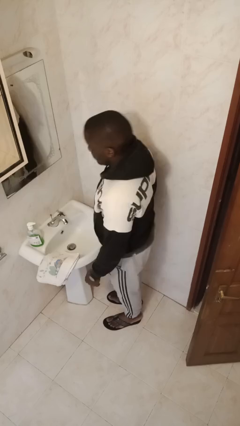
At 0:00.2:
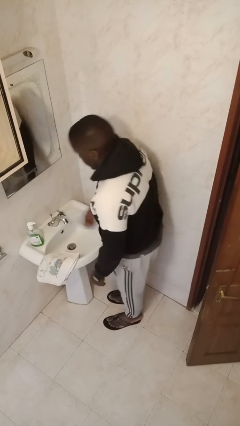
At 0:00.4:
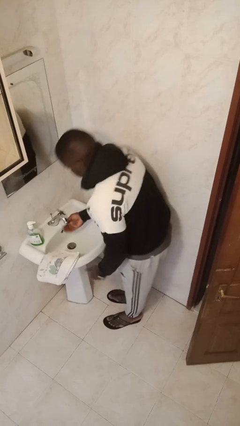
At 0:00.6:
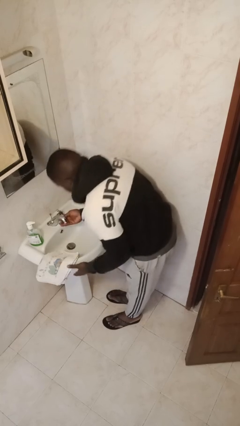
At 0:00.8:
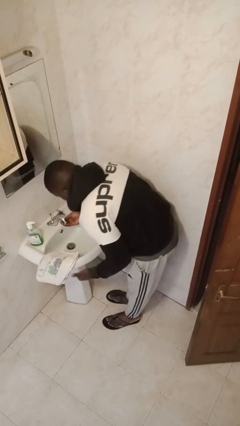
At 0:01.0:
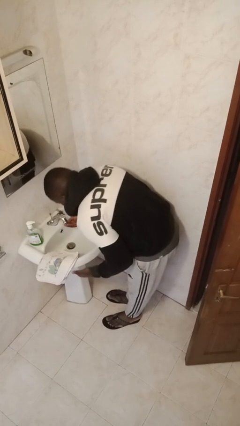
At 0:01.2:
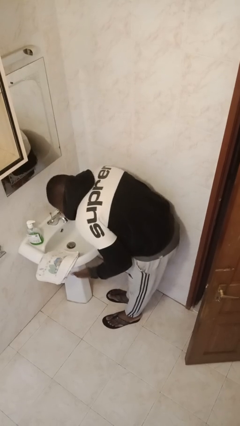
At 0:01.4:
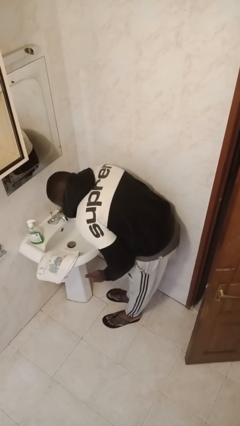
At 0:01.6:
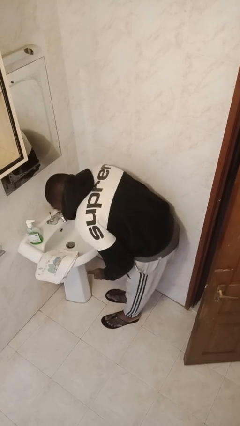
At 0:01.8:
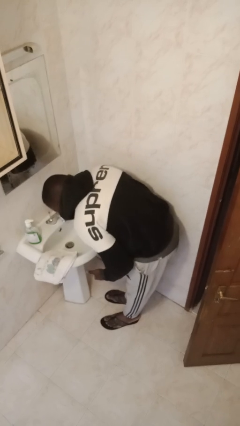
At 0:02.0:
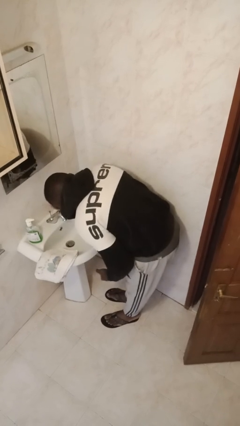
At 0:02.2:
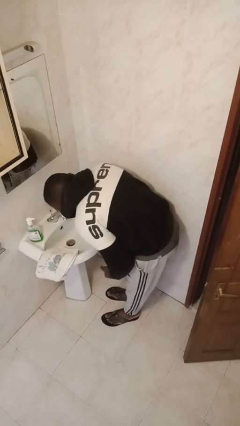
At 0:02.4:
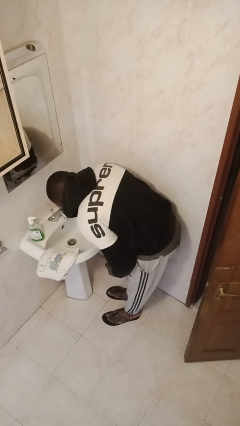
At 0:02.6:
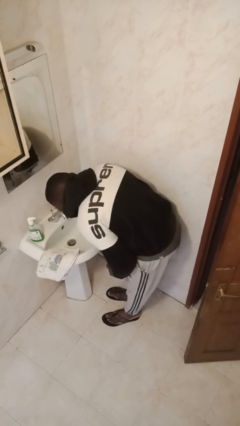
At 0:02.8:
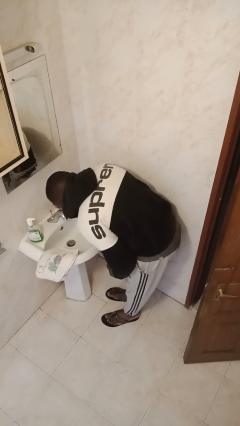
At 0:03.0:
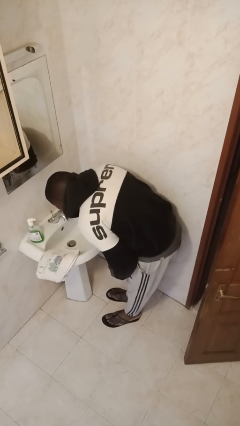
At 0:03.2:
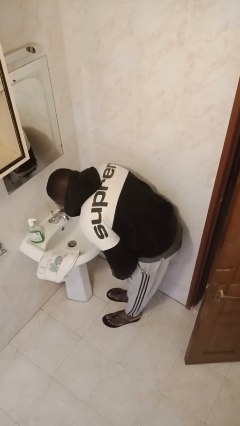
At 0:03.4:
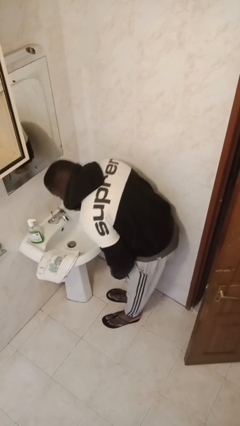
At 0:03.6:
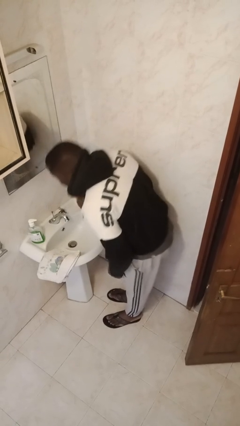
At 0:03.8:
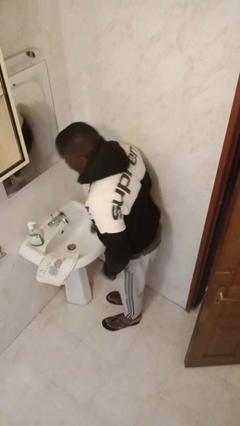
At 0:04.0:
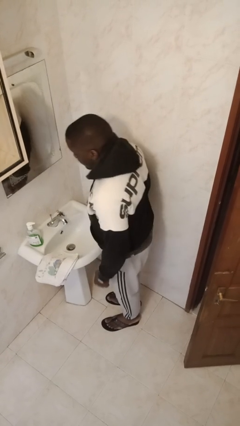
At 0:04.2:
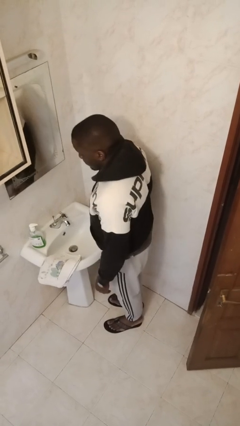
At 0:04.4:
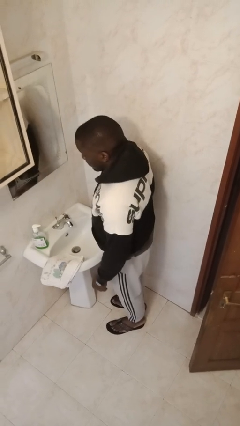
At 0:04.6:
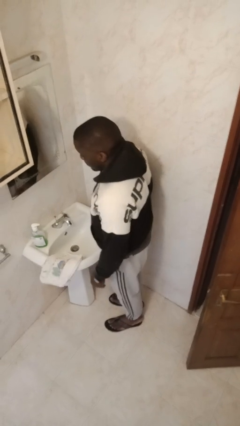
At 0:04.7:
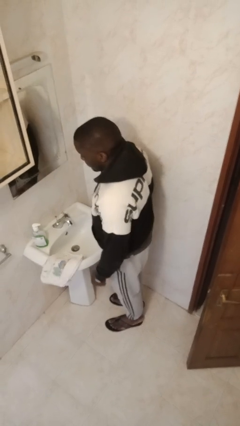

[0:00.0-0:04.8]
person washes face

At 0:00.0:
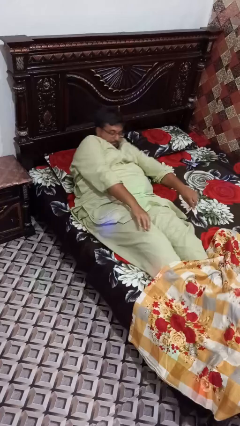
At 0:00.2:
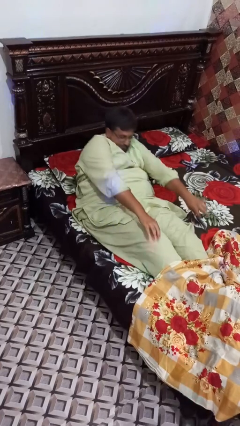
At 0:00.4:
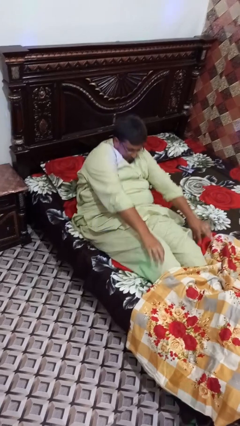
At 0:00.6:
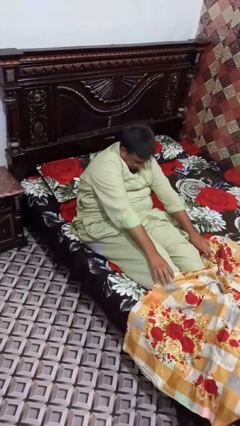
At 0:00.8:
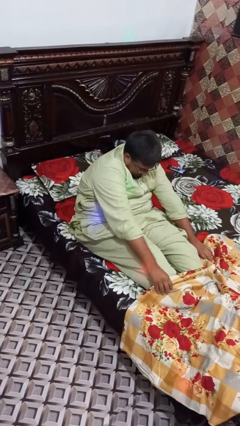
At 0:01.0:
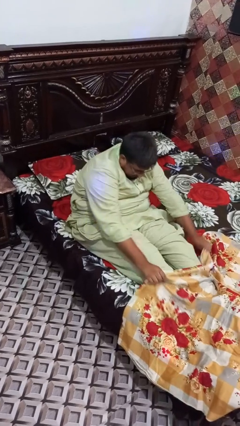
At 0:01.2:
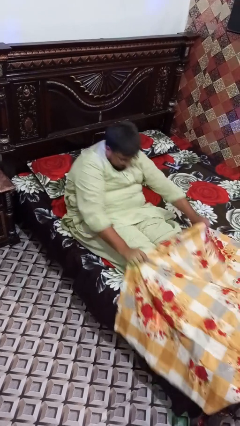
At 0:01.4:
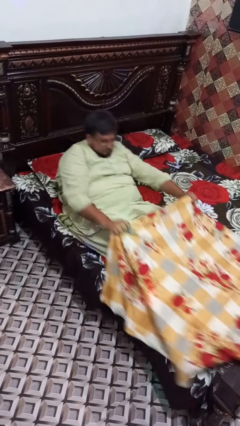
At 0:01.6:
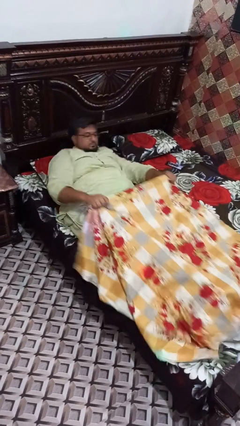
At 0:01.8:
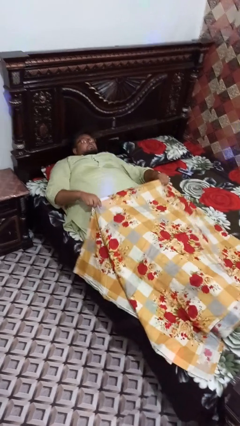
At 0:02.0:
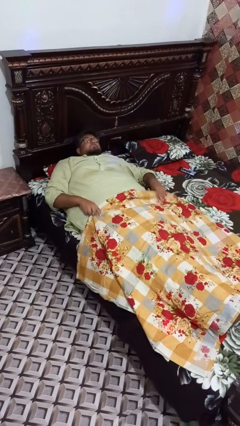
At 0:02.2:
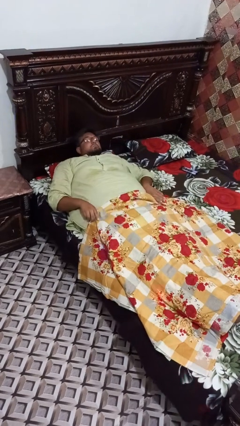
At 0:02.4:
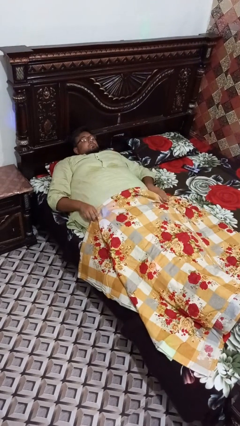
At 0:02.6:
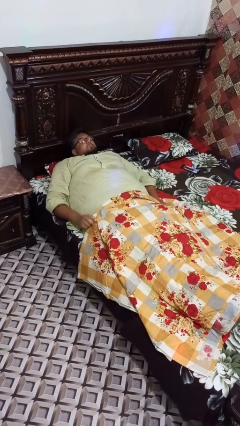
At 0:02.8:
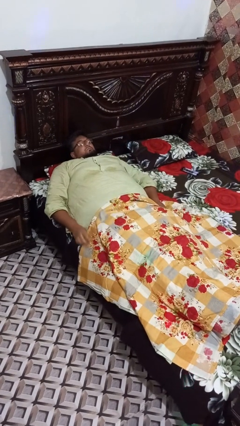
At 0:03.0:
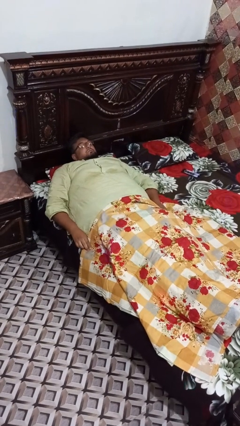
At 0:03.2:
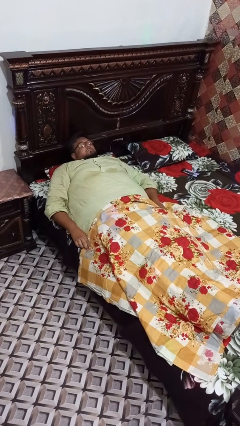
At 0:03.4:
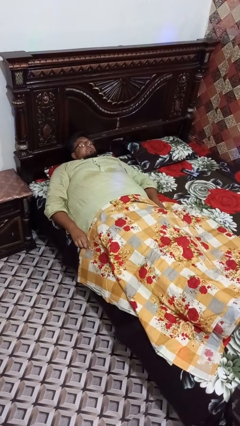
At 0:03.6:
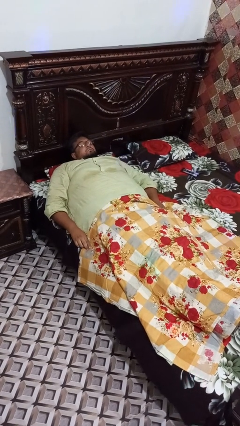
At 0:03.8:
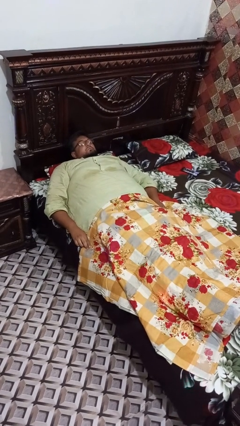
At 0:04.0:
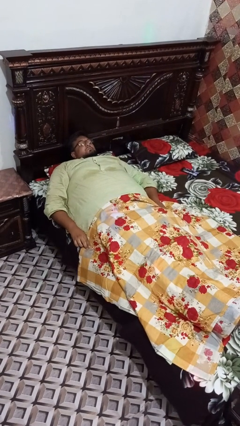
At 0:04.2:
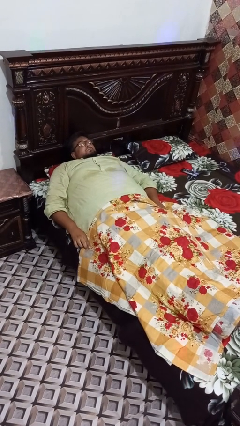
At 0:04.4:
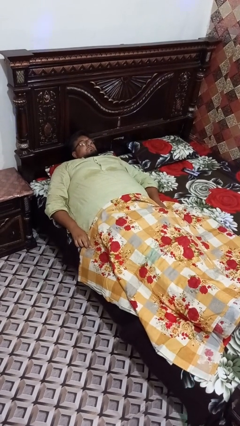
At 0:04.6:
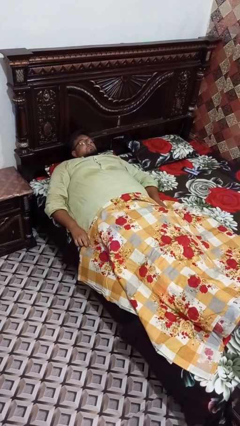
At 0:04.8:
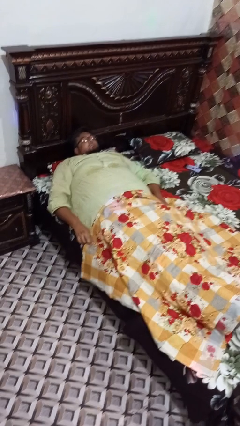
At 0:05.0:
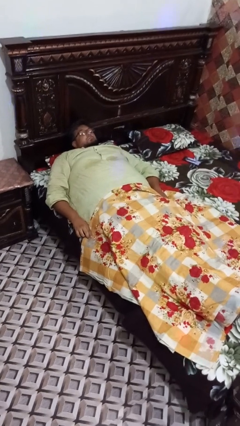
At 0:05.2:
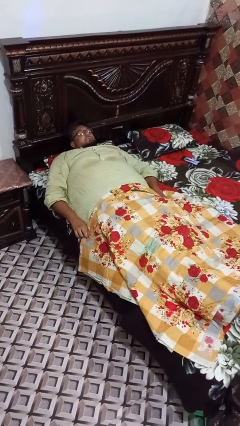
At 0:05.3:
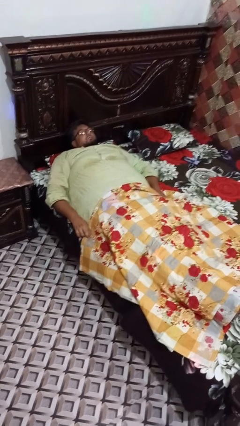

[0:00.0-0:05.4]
person covers with bedsheets

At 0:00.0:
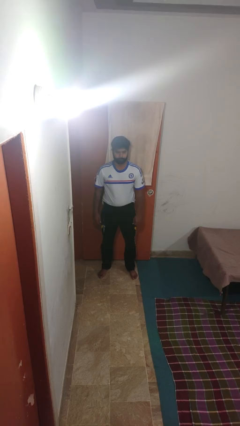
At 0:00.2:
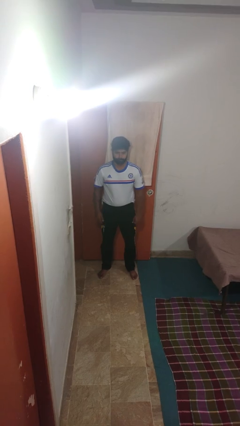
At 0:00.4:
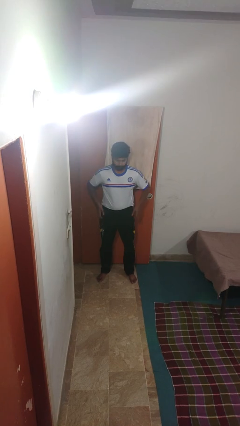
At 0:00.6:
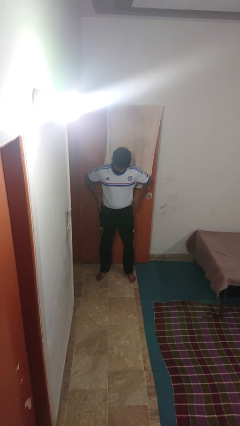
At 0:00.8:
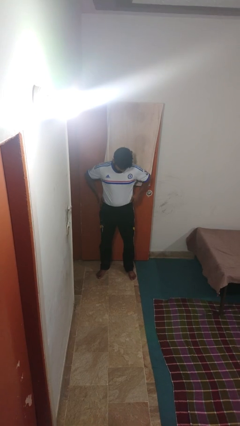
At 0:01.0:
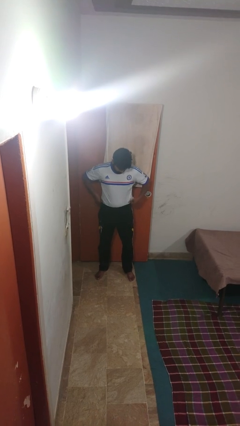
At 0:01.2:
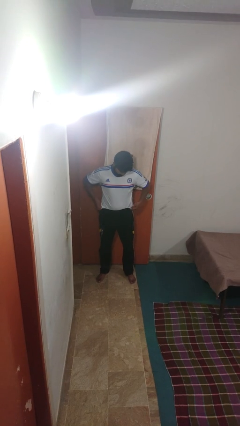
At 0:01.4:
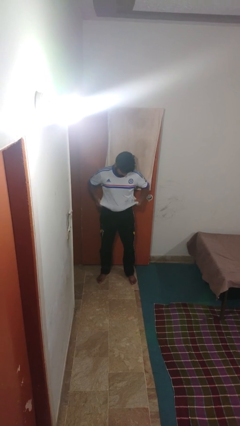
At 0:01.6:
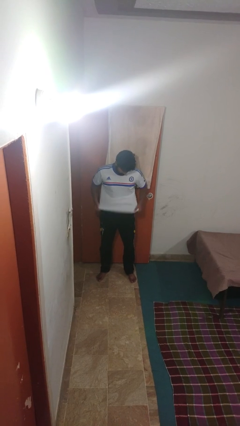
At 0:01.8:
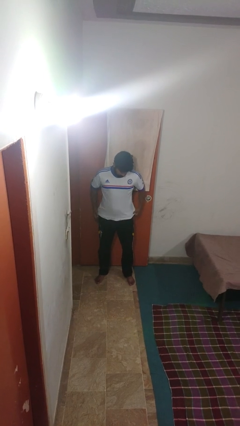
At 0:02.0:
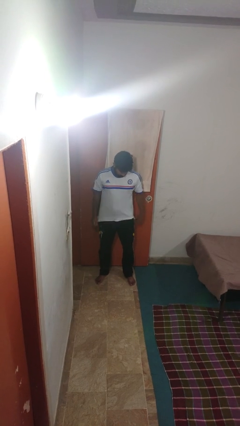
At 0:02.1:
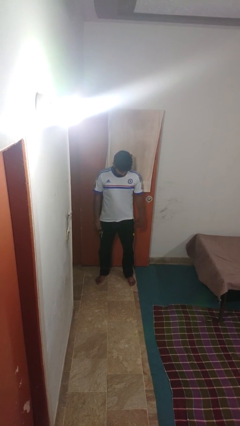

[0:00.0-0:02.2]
person untucks shirt

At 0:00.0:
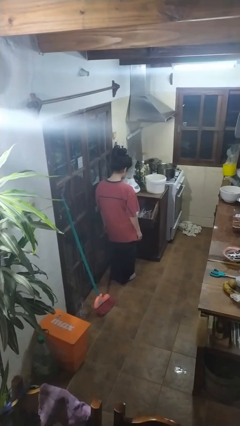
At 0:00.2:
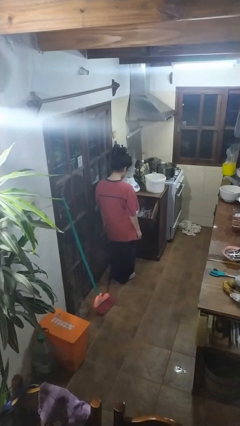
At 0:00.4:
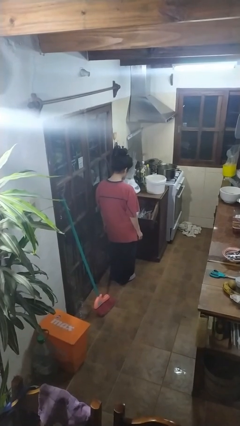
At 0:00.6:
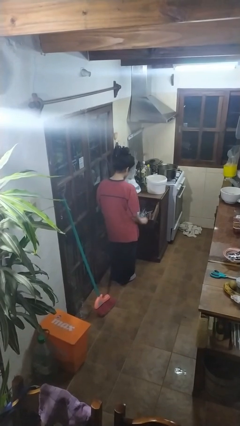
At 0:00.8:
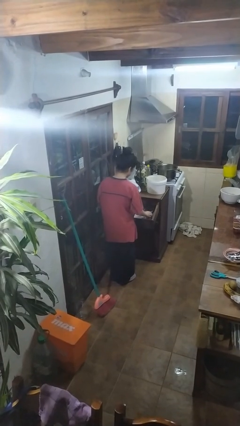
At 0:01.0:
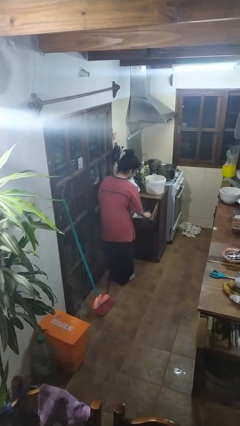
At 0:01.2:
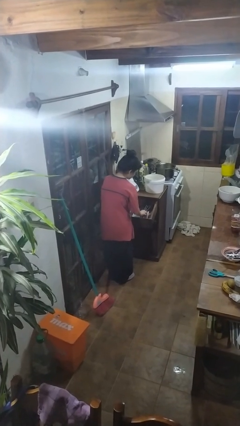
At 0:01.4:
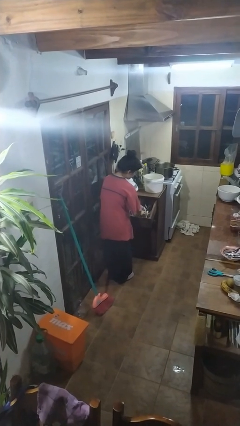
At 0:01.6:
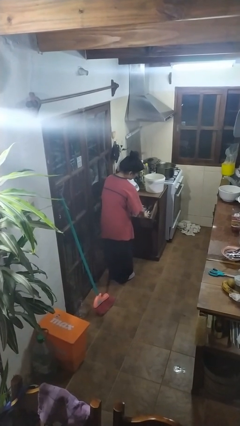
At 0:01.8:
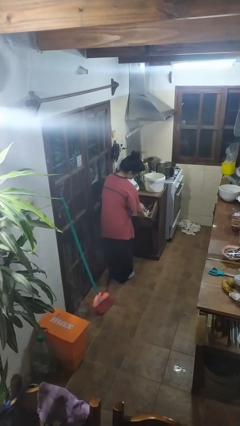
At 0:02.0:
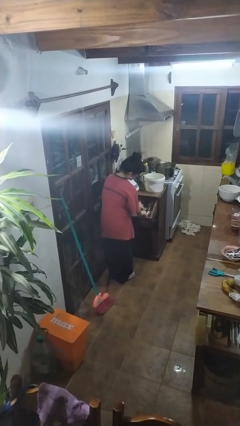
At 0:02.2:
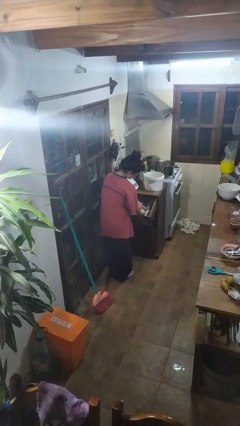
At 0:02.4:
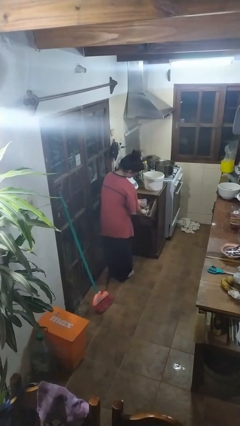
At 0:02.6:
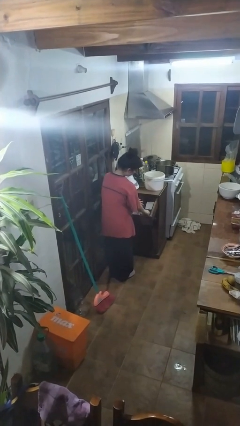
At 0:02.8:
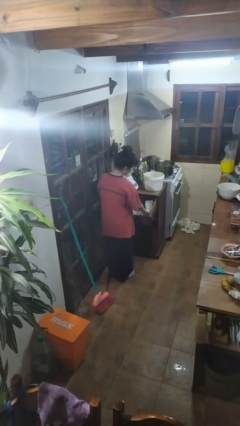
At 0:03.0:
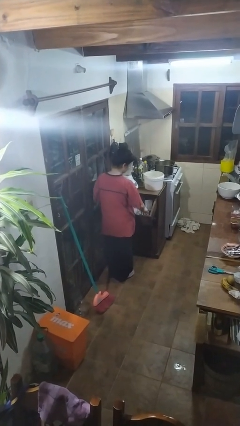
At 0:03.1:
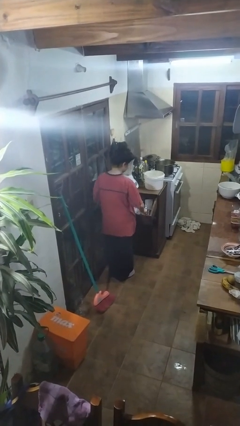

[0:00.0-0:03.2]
person searches in kitchen drawer

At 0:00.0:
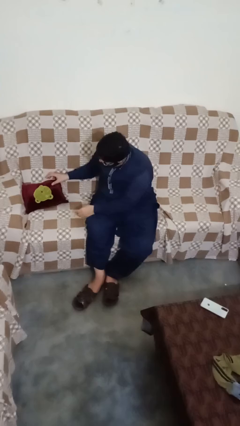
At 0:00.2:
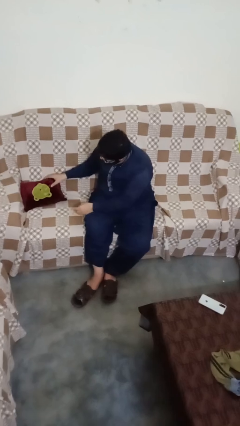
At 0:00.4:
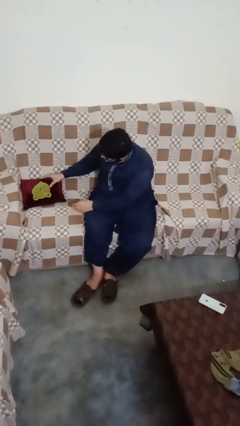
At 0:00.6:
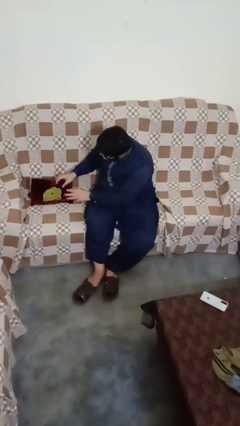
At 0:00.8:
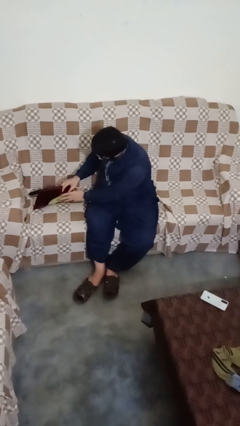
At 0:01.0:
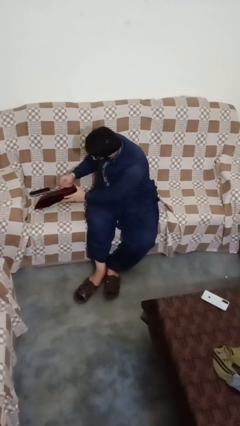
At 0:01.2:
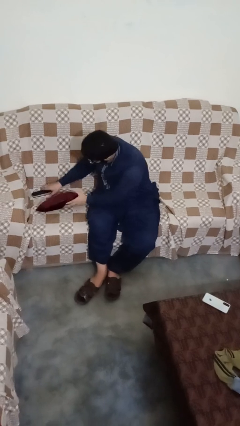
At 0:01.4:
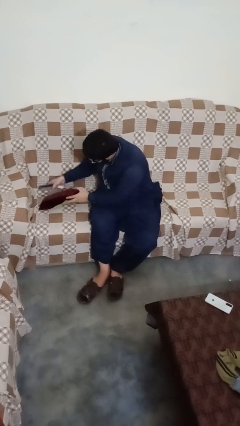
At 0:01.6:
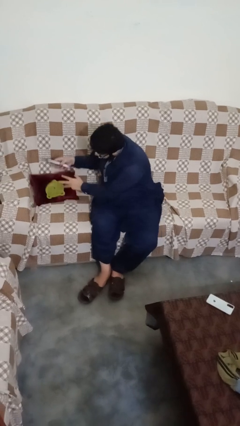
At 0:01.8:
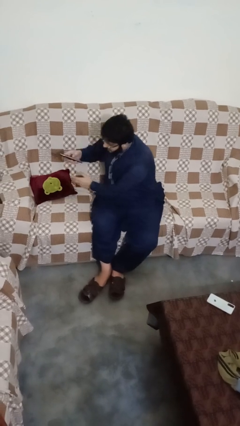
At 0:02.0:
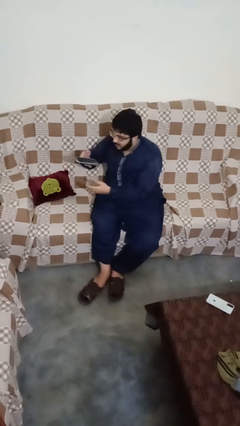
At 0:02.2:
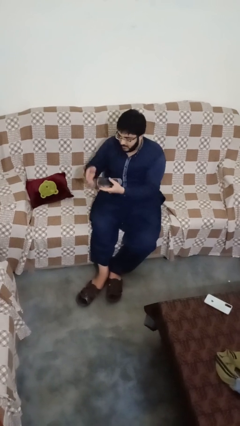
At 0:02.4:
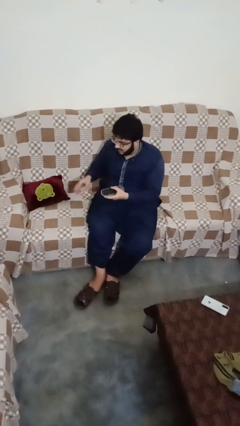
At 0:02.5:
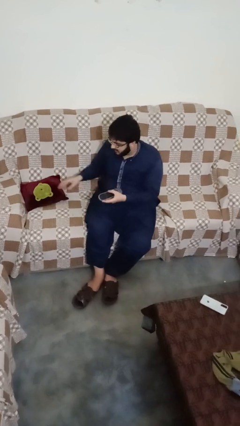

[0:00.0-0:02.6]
person searches in couch
